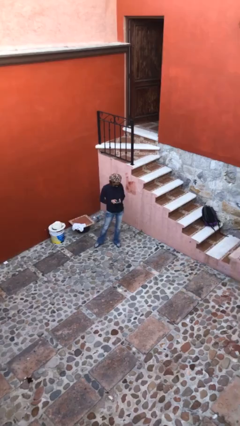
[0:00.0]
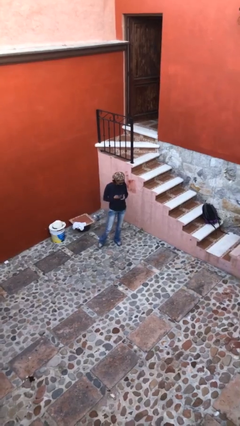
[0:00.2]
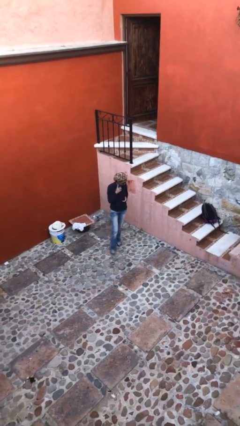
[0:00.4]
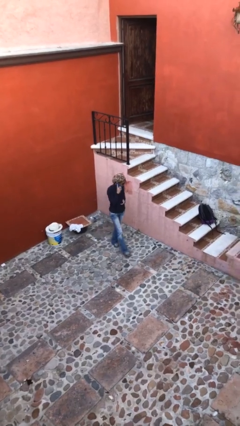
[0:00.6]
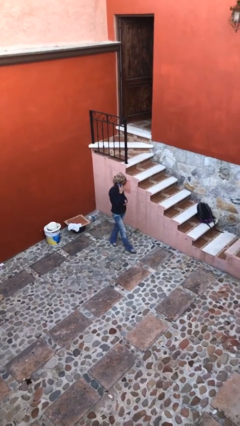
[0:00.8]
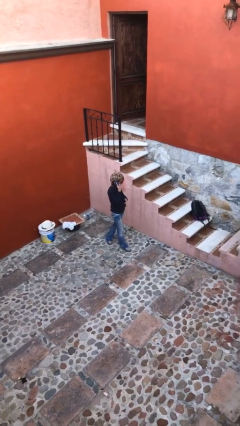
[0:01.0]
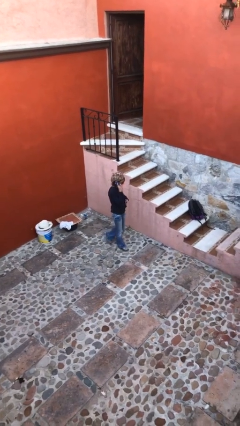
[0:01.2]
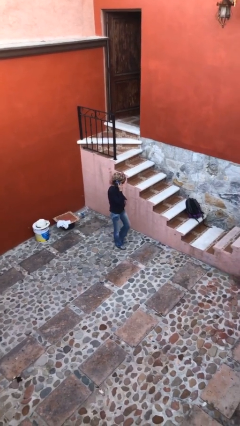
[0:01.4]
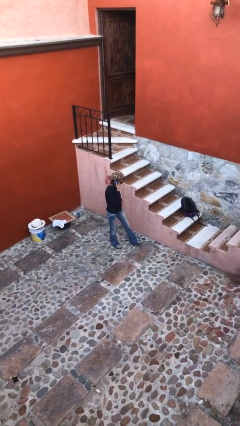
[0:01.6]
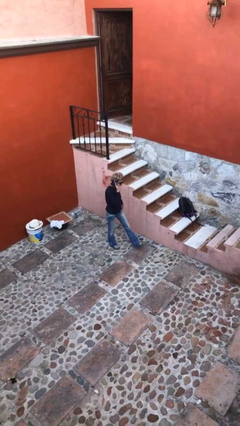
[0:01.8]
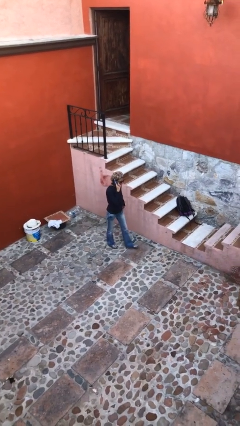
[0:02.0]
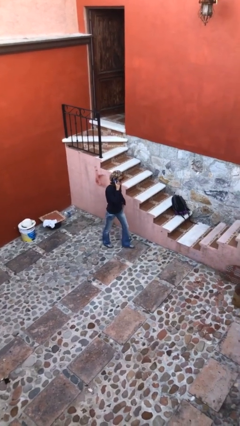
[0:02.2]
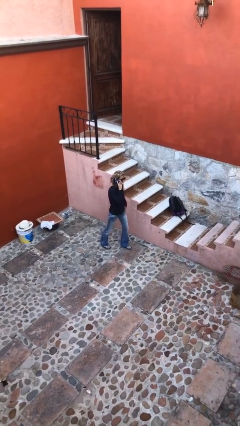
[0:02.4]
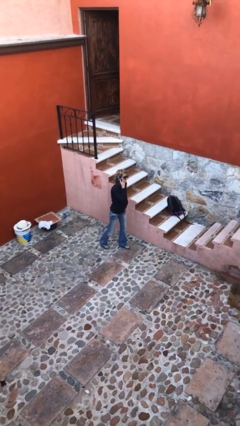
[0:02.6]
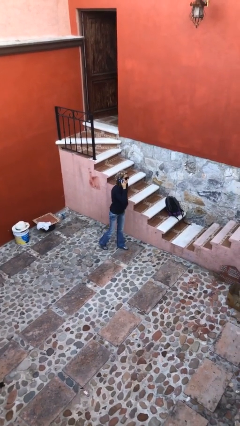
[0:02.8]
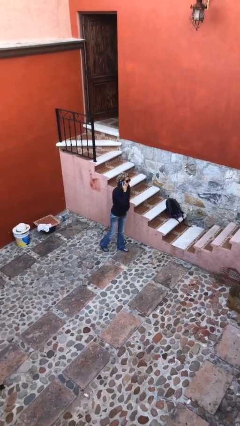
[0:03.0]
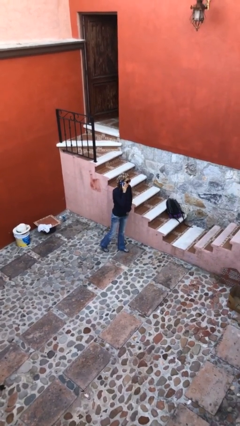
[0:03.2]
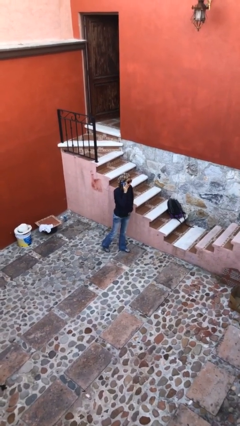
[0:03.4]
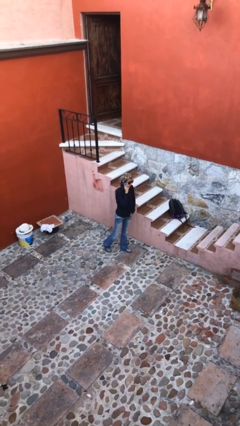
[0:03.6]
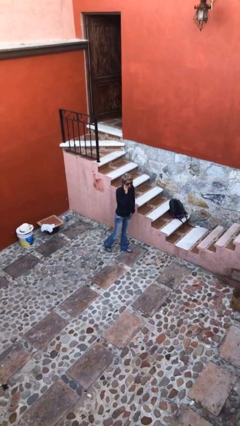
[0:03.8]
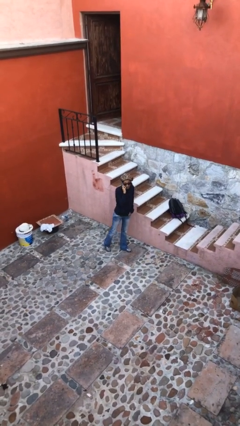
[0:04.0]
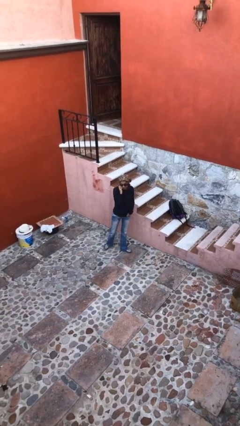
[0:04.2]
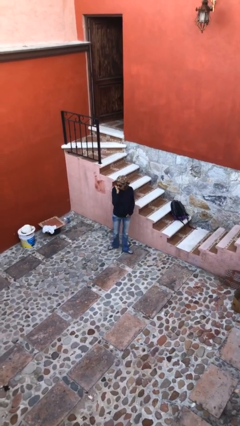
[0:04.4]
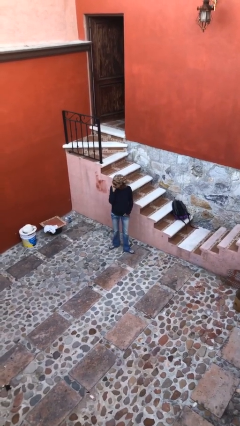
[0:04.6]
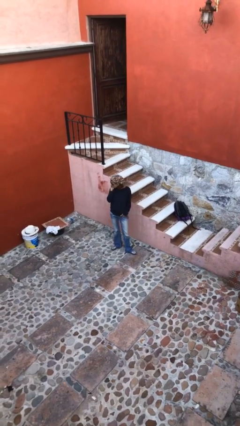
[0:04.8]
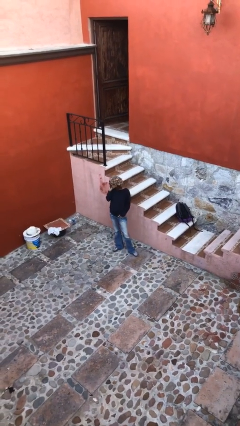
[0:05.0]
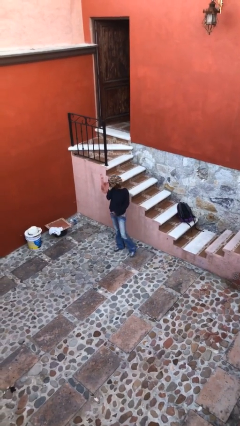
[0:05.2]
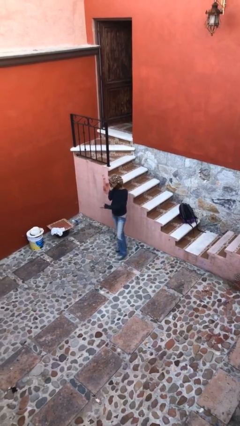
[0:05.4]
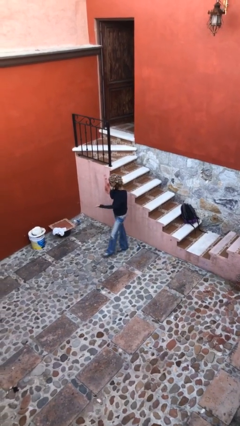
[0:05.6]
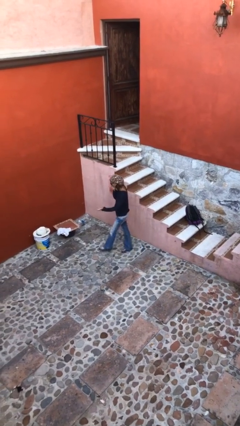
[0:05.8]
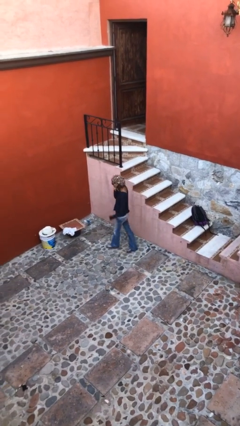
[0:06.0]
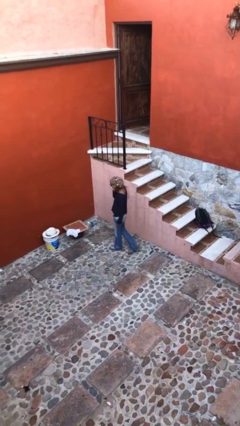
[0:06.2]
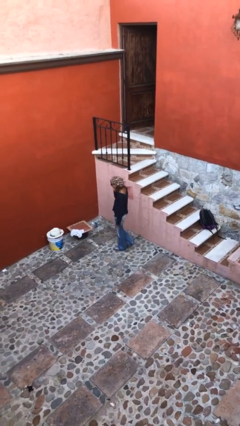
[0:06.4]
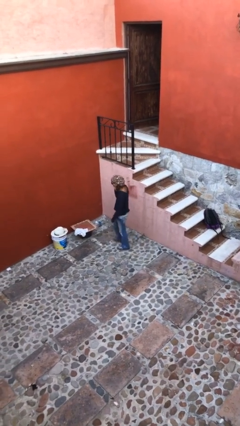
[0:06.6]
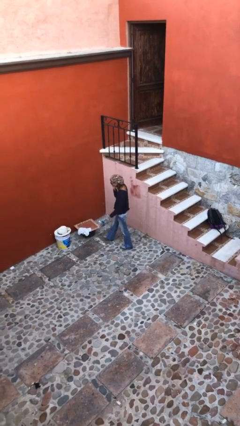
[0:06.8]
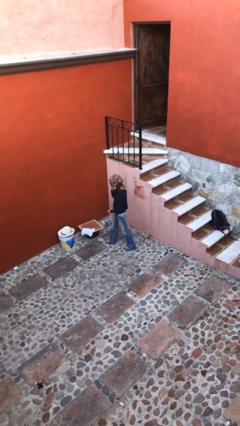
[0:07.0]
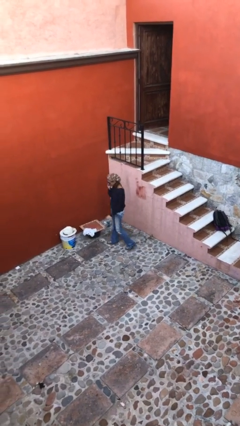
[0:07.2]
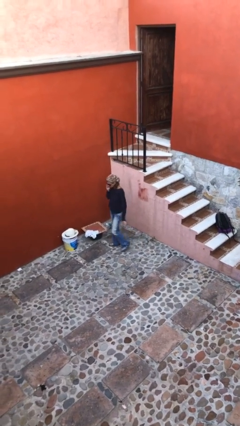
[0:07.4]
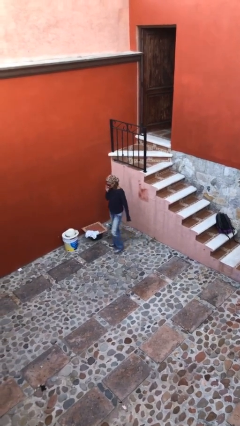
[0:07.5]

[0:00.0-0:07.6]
person talks on phone

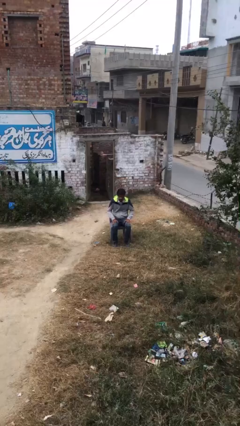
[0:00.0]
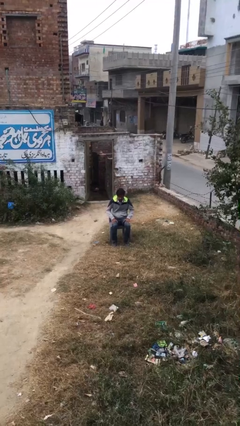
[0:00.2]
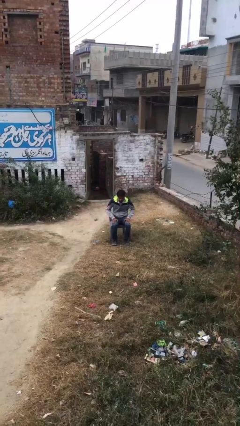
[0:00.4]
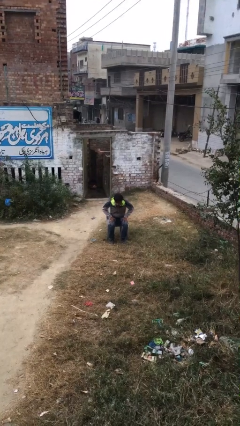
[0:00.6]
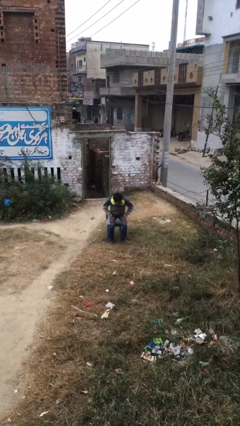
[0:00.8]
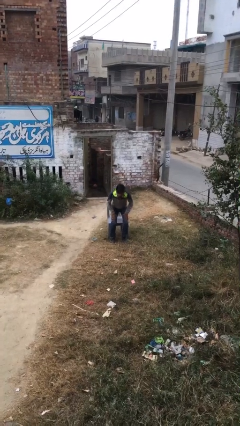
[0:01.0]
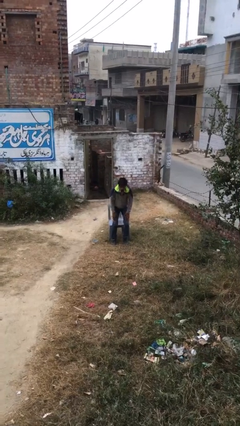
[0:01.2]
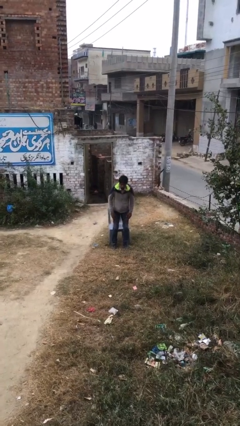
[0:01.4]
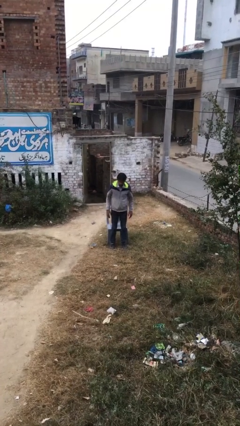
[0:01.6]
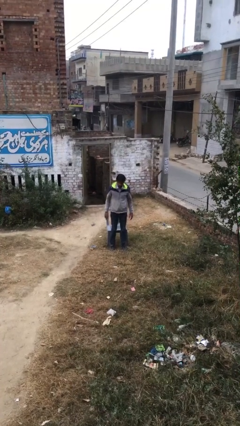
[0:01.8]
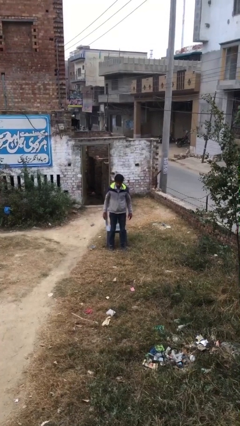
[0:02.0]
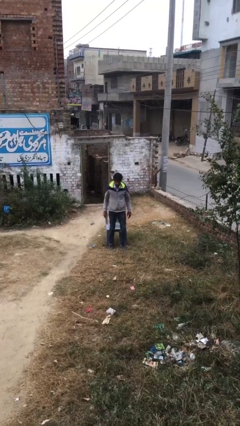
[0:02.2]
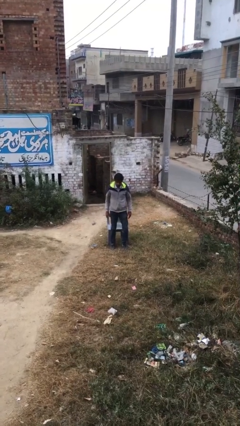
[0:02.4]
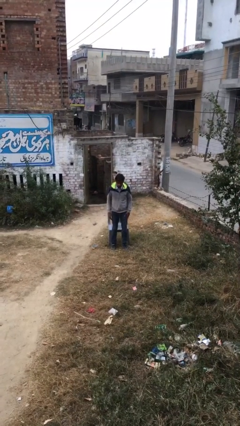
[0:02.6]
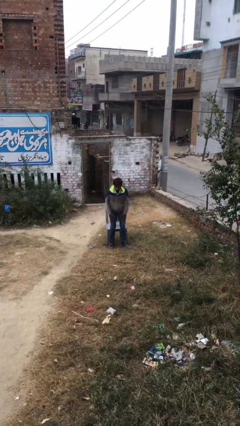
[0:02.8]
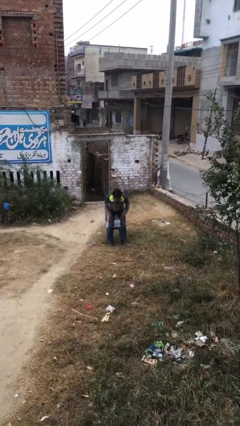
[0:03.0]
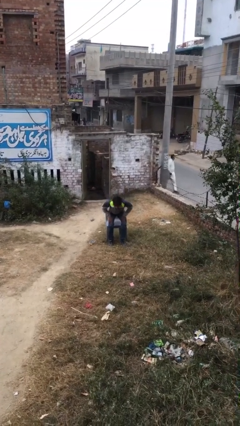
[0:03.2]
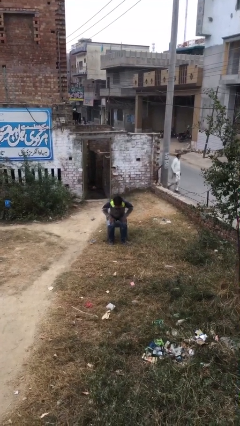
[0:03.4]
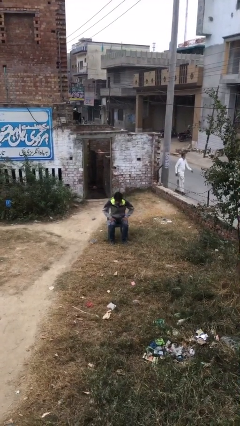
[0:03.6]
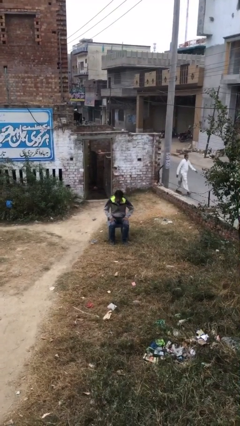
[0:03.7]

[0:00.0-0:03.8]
person stands up

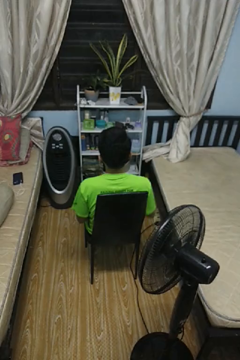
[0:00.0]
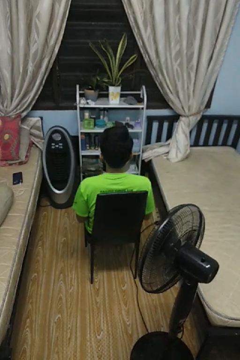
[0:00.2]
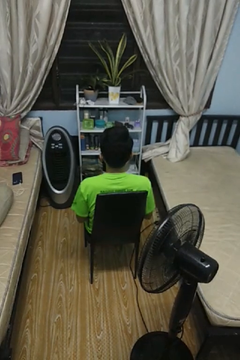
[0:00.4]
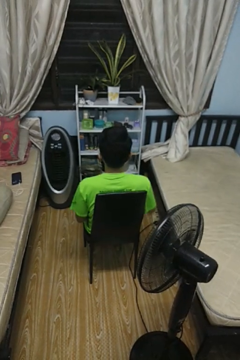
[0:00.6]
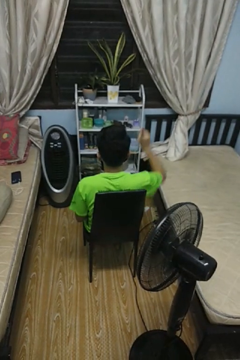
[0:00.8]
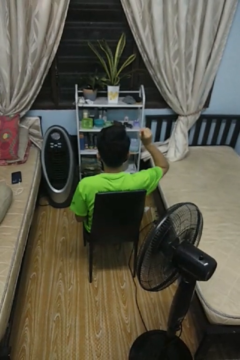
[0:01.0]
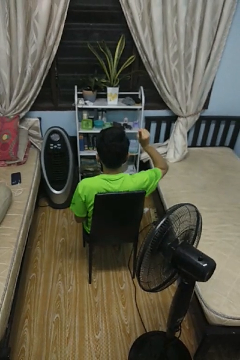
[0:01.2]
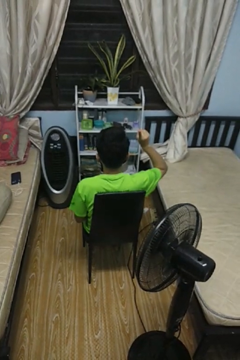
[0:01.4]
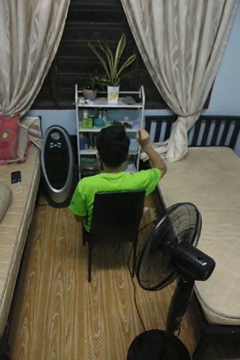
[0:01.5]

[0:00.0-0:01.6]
person gestures number one

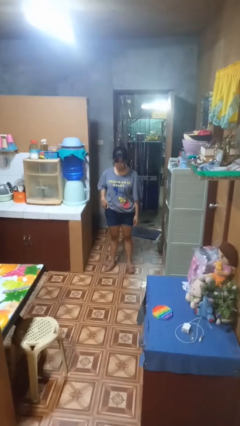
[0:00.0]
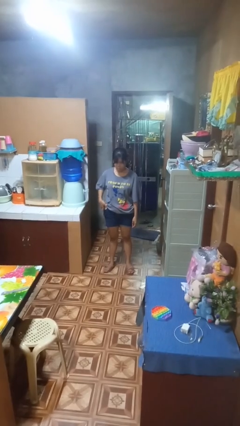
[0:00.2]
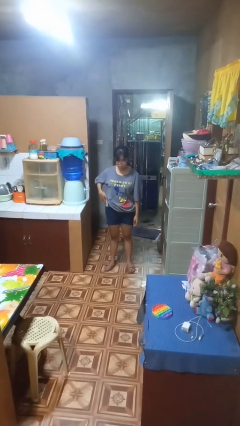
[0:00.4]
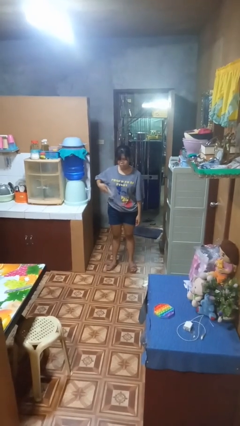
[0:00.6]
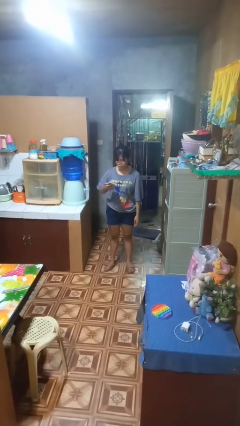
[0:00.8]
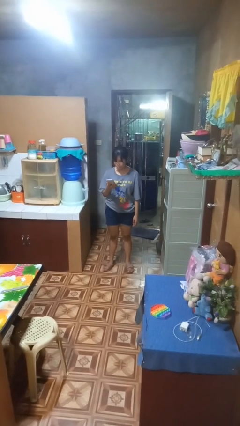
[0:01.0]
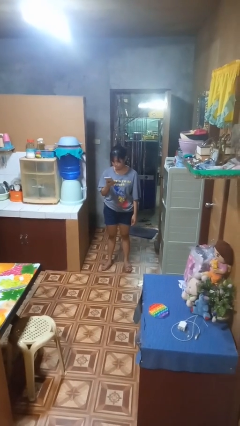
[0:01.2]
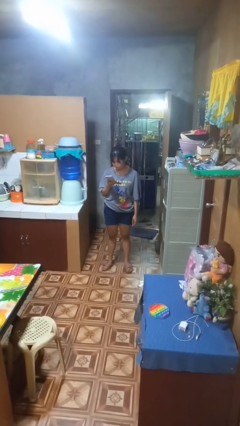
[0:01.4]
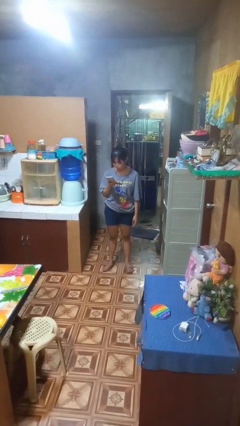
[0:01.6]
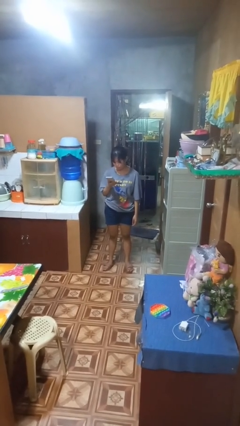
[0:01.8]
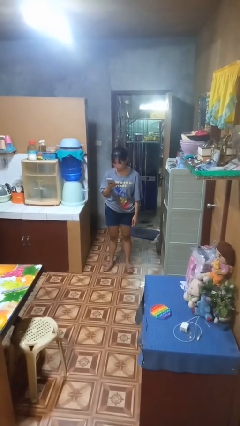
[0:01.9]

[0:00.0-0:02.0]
person takes phone from pocket

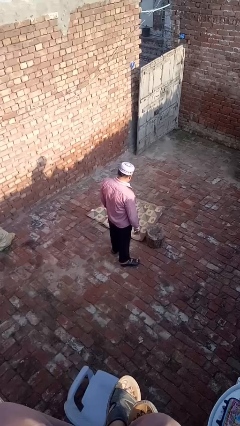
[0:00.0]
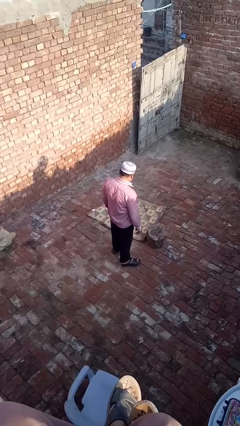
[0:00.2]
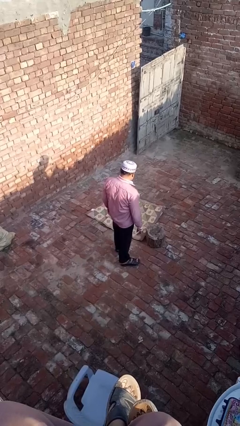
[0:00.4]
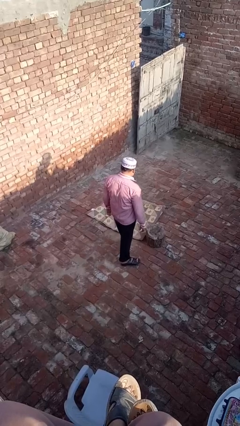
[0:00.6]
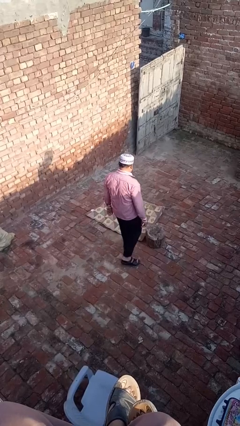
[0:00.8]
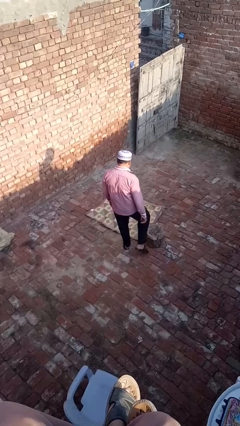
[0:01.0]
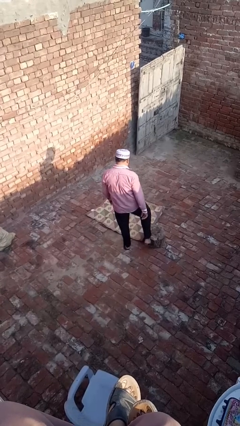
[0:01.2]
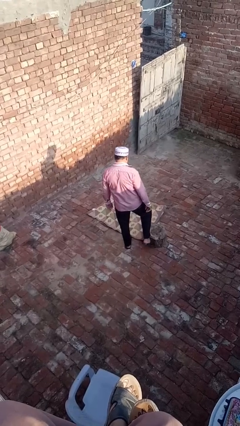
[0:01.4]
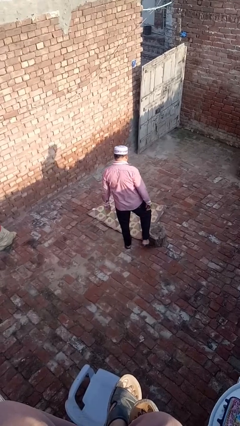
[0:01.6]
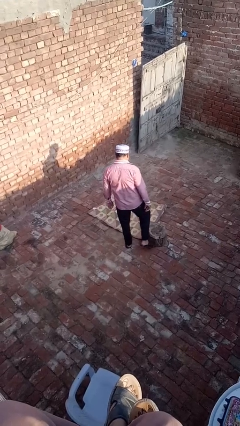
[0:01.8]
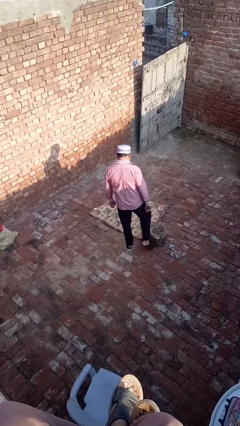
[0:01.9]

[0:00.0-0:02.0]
person trips on object on floor

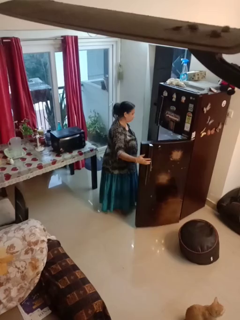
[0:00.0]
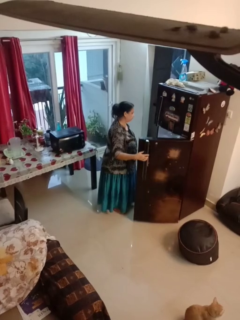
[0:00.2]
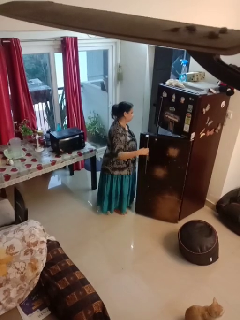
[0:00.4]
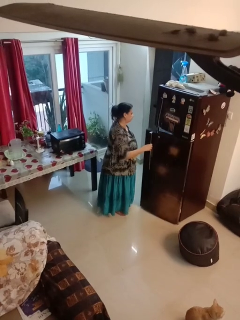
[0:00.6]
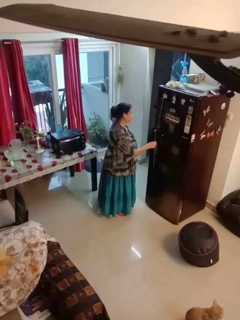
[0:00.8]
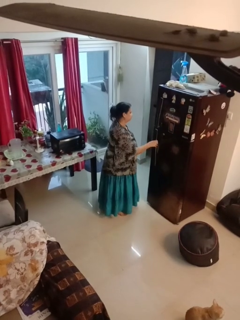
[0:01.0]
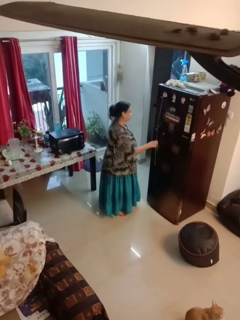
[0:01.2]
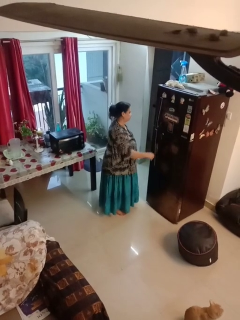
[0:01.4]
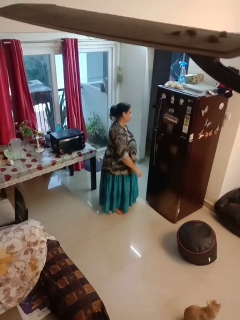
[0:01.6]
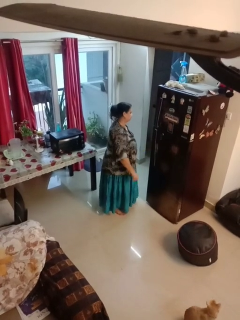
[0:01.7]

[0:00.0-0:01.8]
person closes refrigerator
